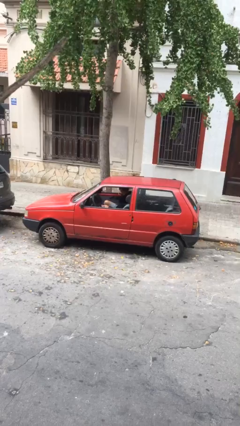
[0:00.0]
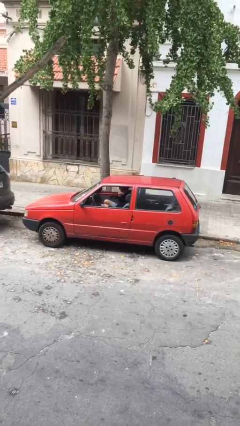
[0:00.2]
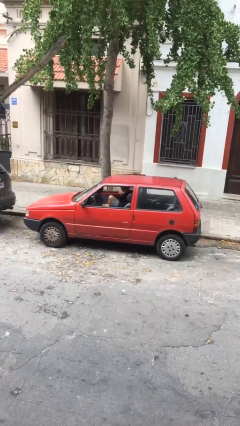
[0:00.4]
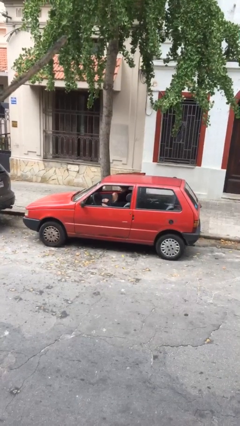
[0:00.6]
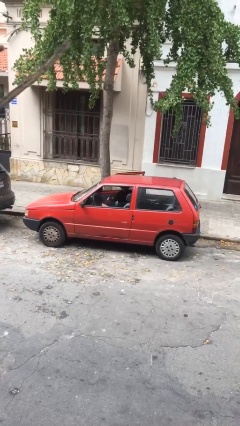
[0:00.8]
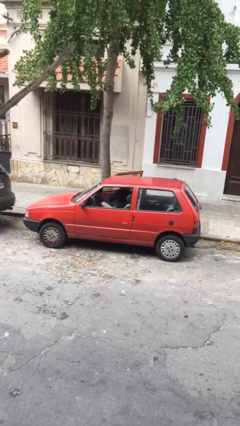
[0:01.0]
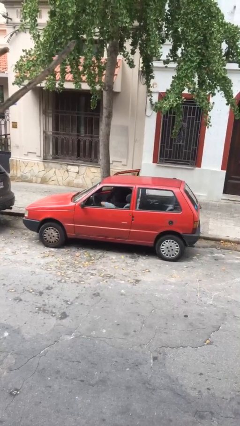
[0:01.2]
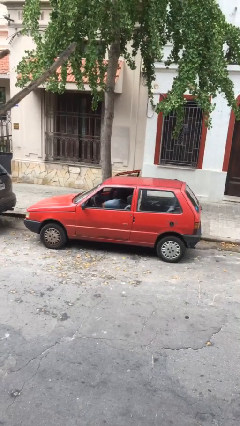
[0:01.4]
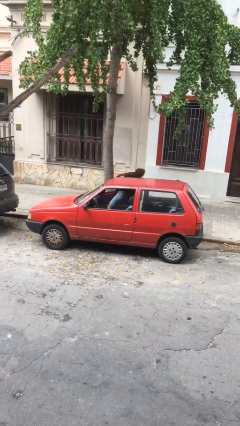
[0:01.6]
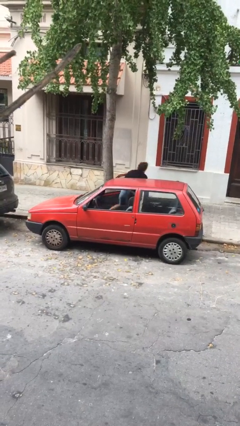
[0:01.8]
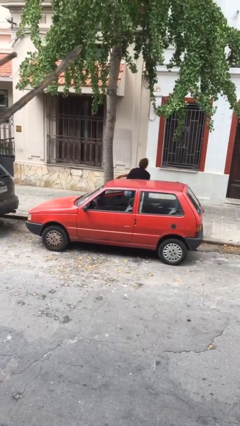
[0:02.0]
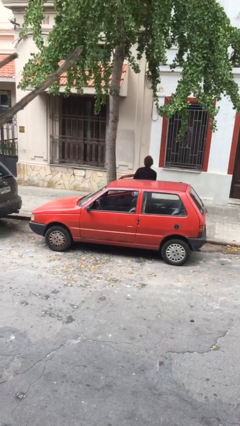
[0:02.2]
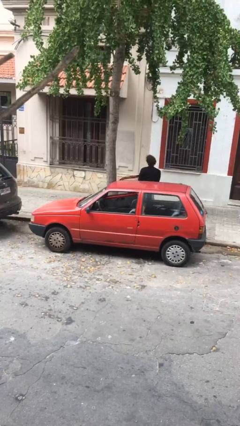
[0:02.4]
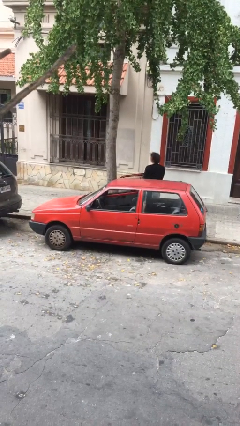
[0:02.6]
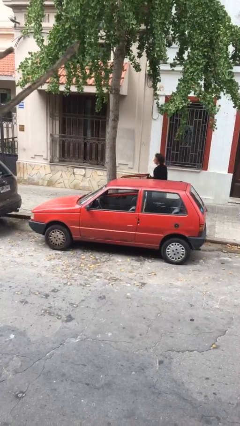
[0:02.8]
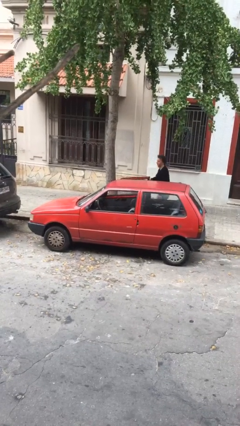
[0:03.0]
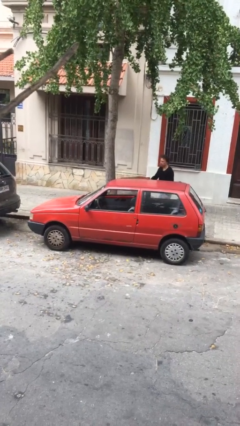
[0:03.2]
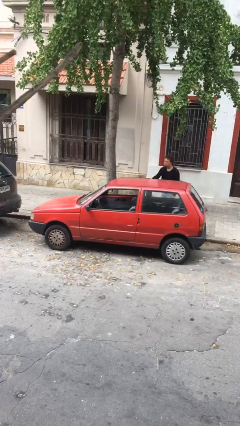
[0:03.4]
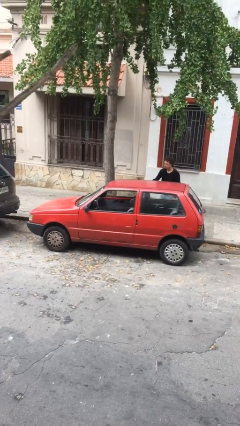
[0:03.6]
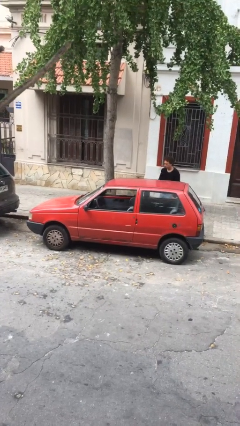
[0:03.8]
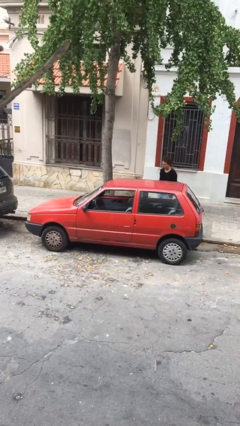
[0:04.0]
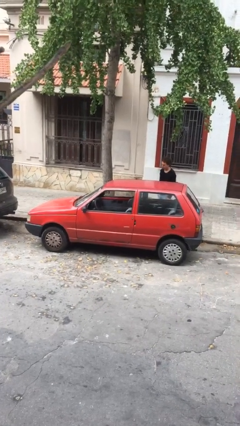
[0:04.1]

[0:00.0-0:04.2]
car drops off person

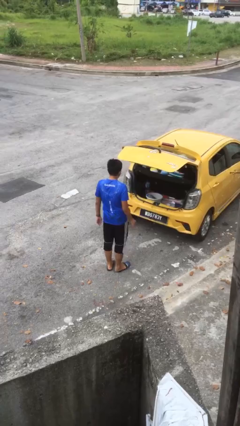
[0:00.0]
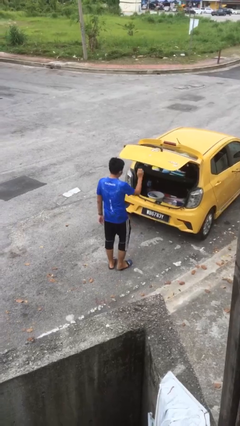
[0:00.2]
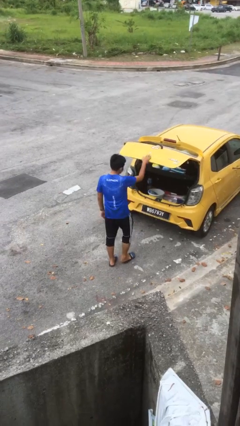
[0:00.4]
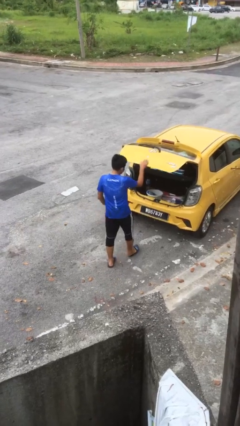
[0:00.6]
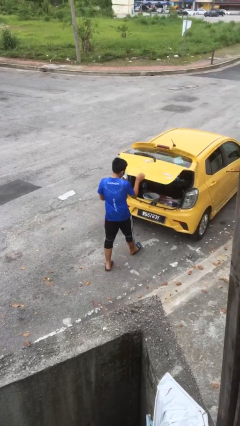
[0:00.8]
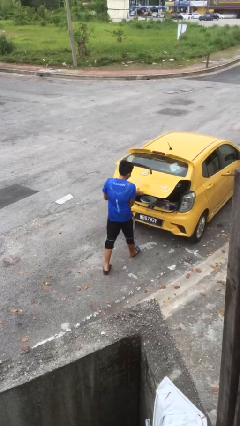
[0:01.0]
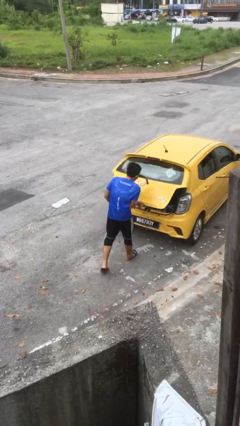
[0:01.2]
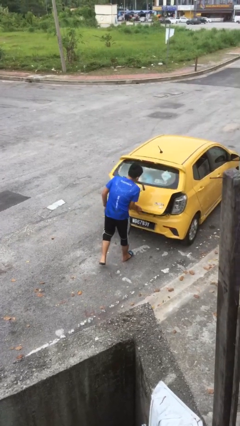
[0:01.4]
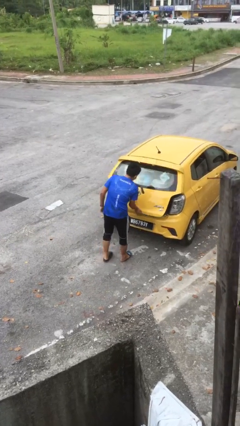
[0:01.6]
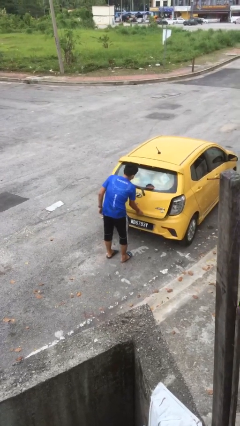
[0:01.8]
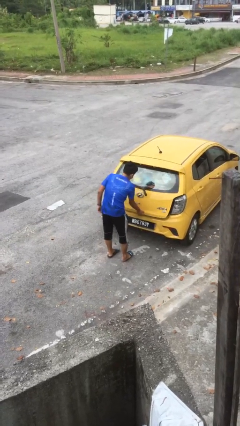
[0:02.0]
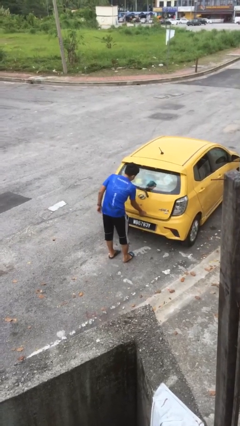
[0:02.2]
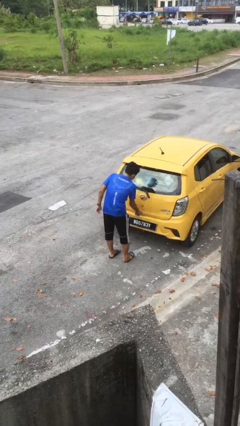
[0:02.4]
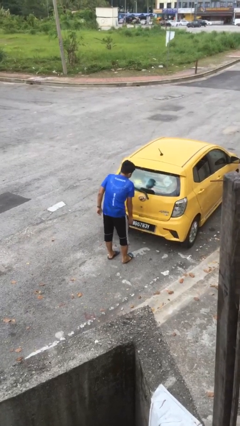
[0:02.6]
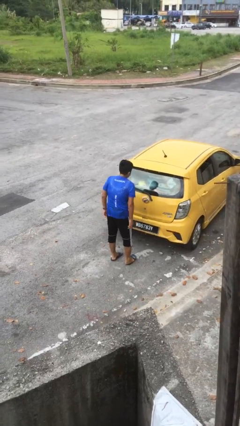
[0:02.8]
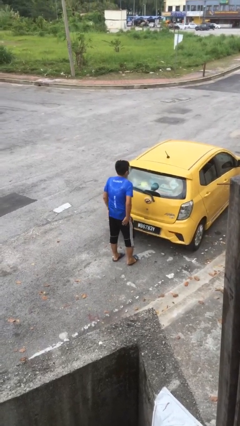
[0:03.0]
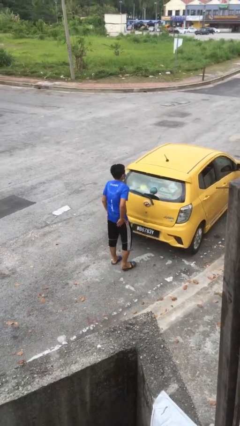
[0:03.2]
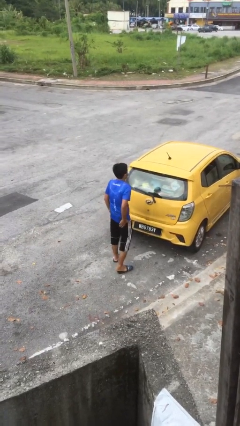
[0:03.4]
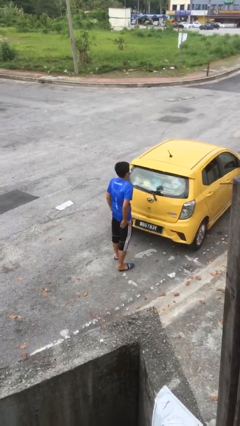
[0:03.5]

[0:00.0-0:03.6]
person closes car trunk

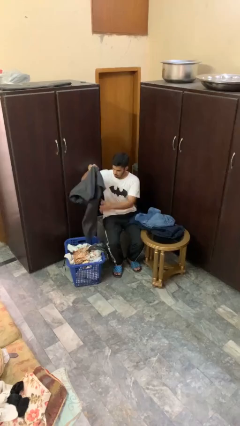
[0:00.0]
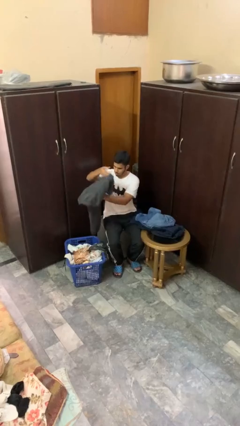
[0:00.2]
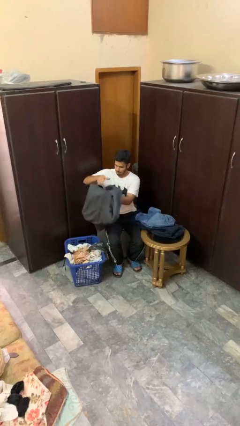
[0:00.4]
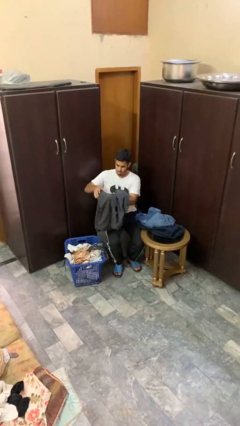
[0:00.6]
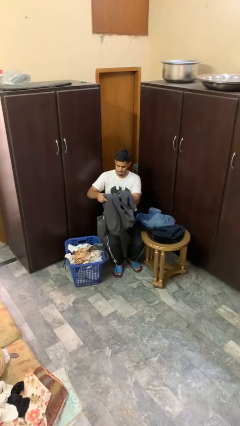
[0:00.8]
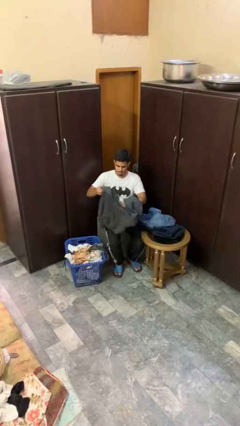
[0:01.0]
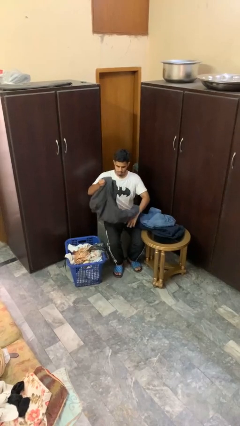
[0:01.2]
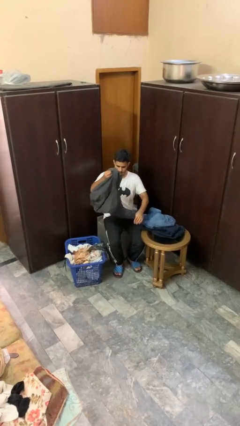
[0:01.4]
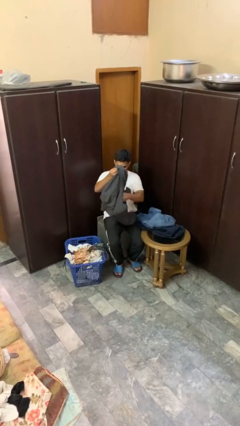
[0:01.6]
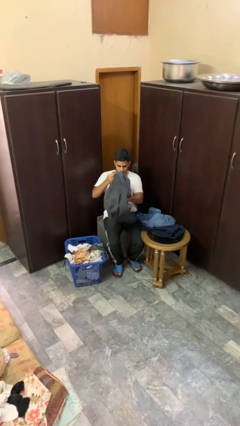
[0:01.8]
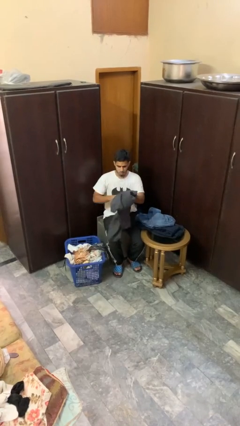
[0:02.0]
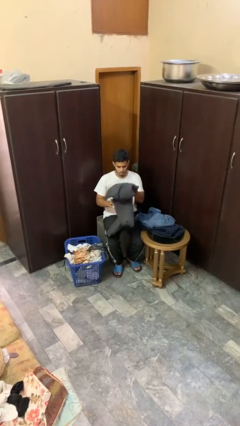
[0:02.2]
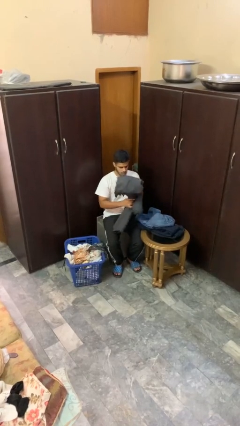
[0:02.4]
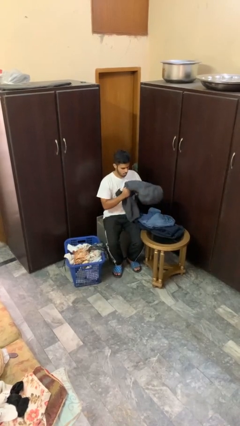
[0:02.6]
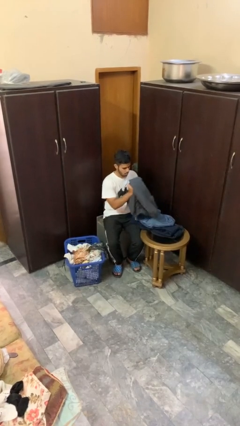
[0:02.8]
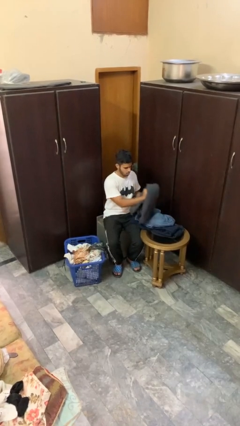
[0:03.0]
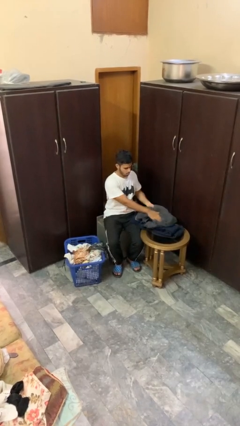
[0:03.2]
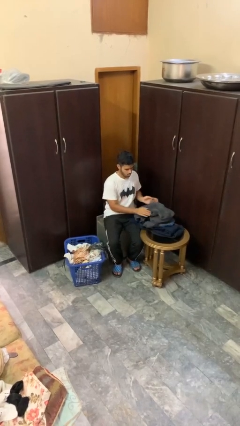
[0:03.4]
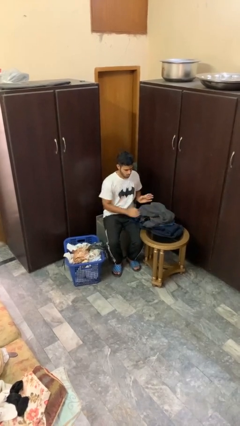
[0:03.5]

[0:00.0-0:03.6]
person folds pants

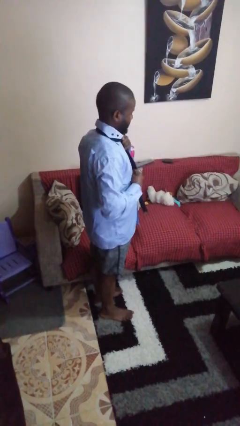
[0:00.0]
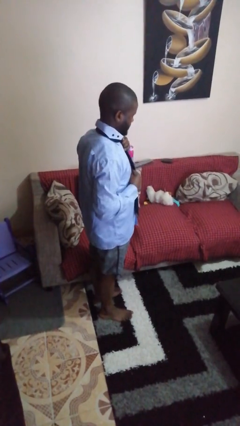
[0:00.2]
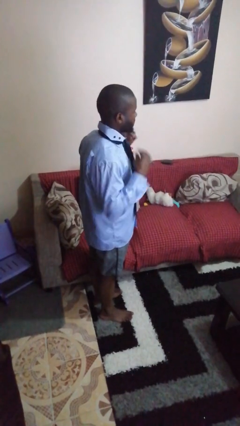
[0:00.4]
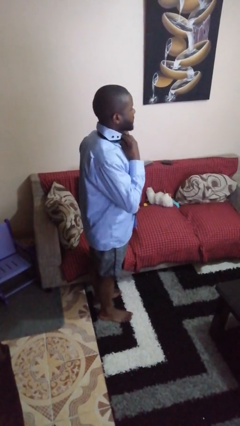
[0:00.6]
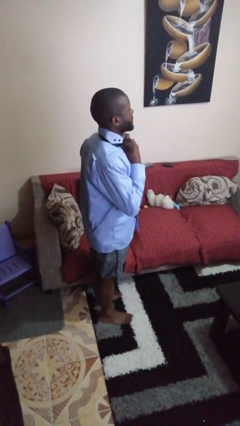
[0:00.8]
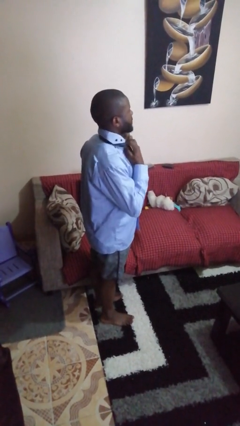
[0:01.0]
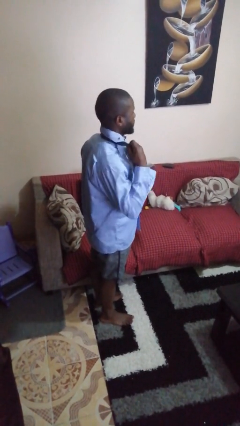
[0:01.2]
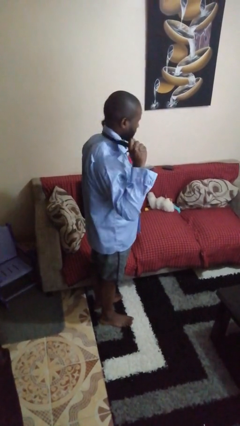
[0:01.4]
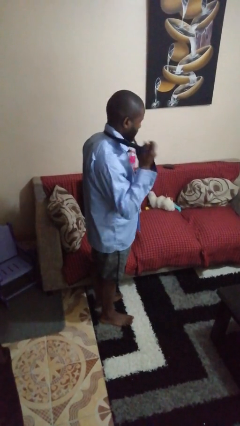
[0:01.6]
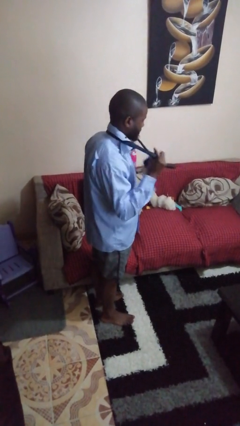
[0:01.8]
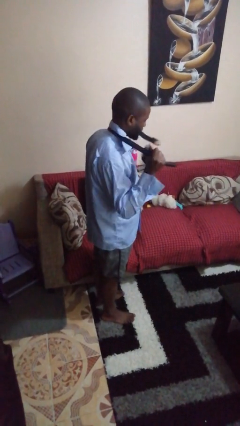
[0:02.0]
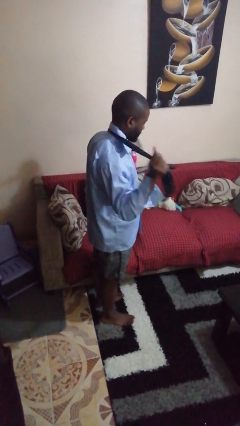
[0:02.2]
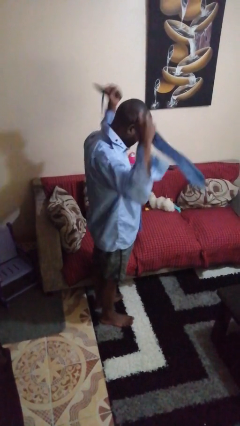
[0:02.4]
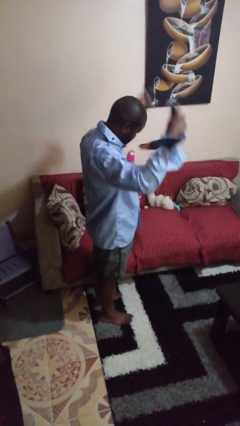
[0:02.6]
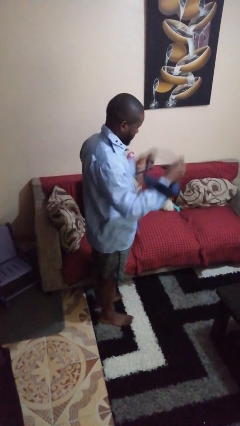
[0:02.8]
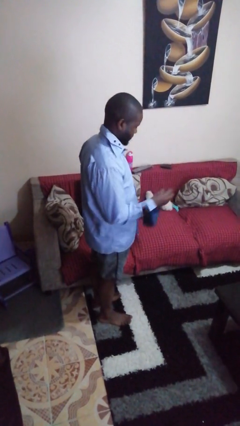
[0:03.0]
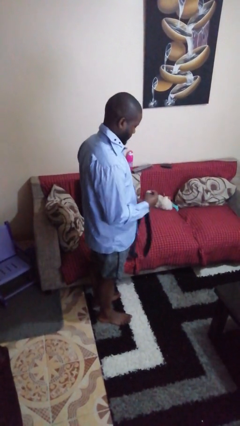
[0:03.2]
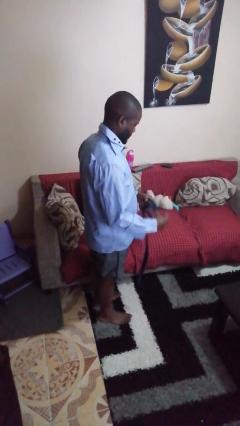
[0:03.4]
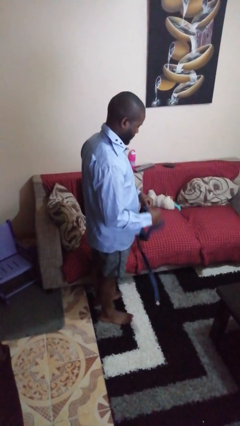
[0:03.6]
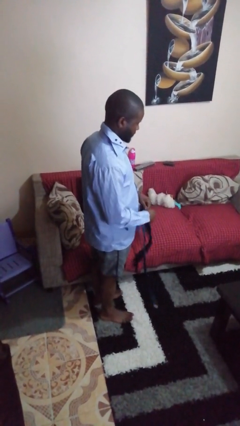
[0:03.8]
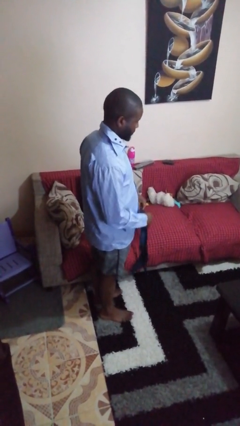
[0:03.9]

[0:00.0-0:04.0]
person takes off necktie

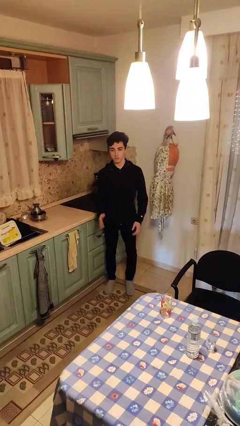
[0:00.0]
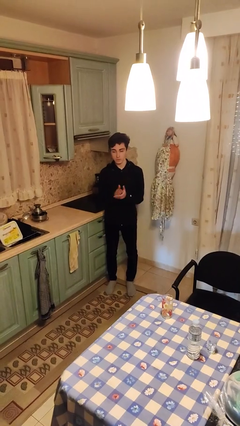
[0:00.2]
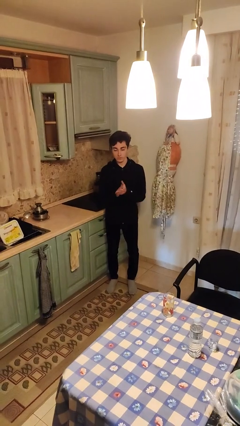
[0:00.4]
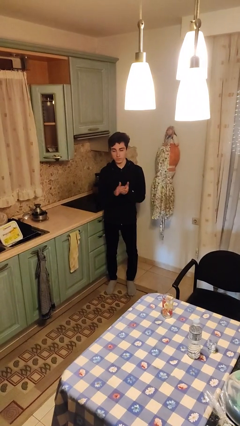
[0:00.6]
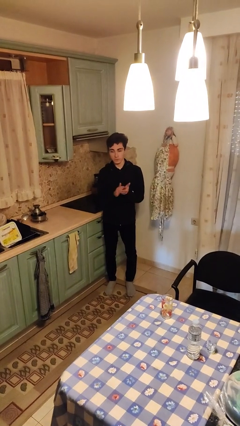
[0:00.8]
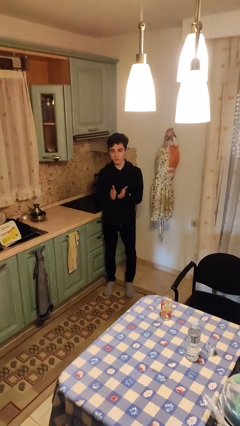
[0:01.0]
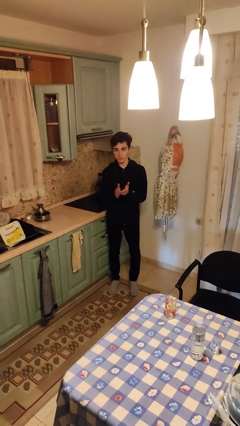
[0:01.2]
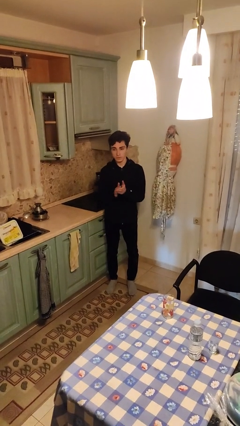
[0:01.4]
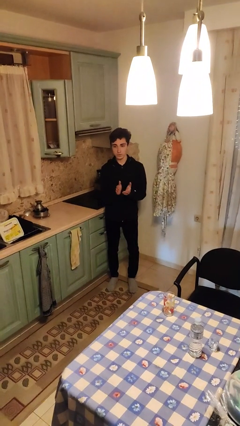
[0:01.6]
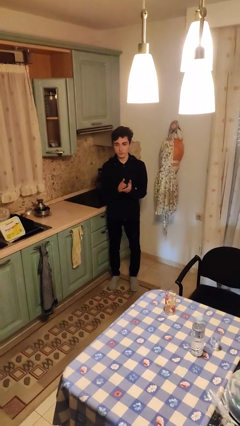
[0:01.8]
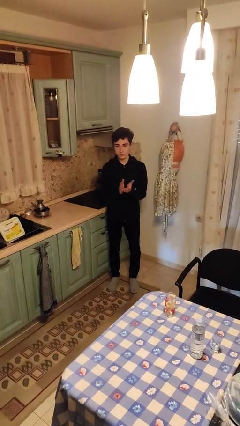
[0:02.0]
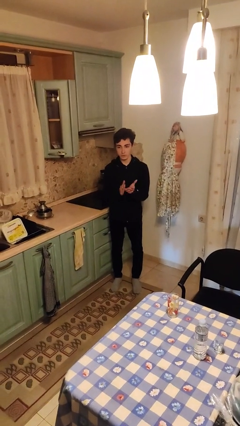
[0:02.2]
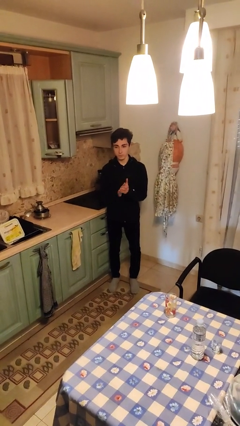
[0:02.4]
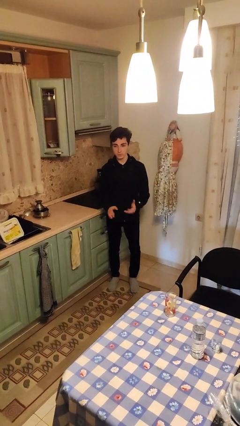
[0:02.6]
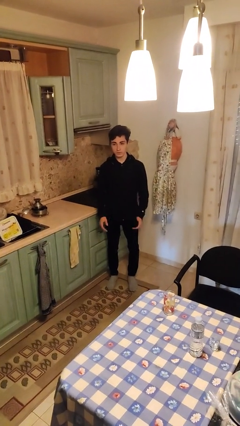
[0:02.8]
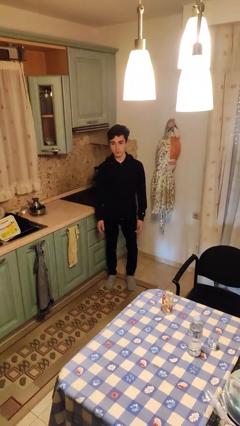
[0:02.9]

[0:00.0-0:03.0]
person claps hands
